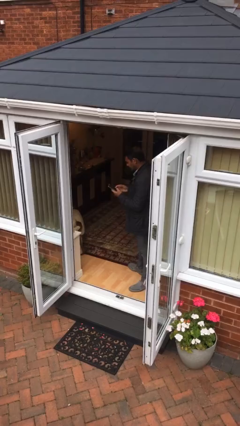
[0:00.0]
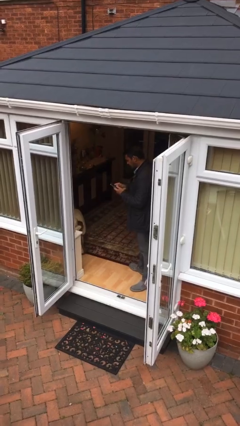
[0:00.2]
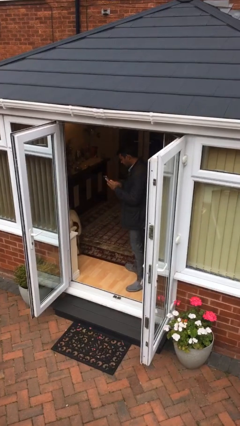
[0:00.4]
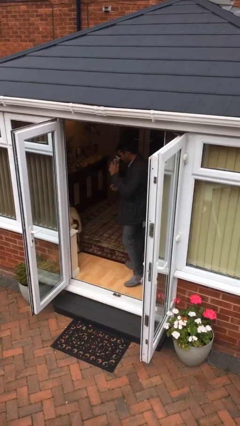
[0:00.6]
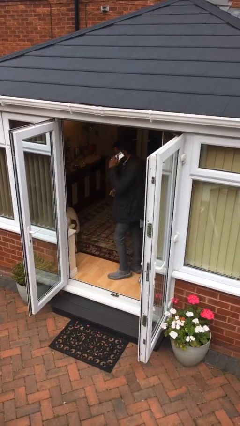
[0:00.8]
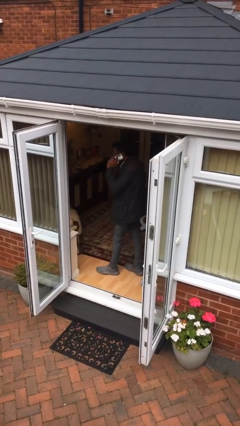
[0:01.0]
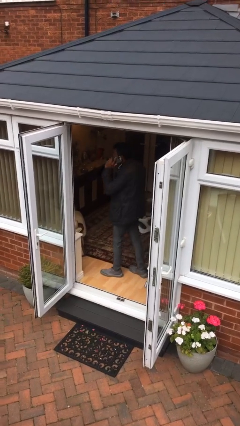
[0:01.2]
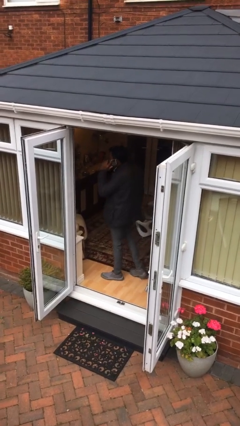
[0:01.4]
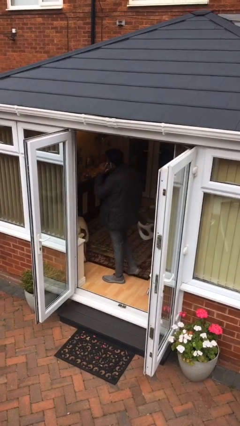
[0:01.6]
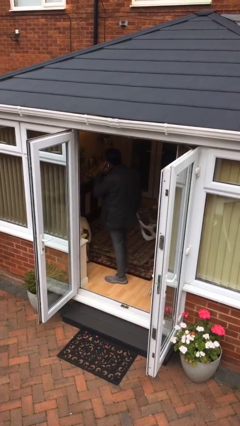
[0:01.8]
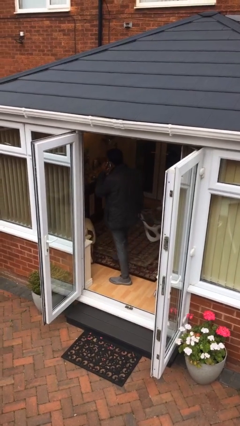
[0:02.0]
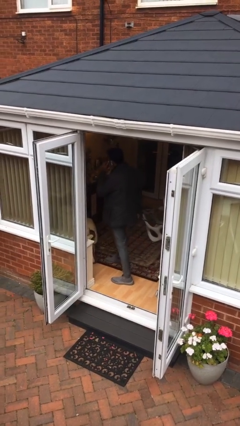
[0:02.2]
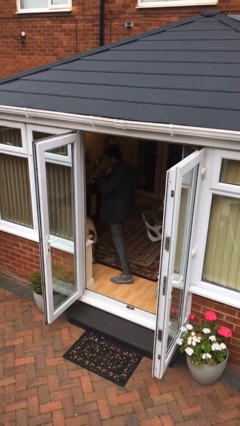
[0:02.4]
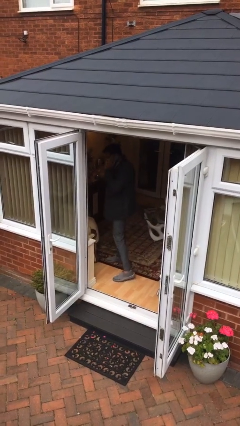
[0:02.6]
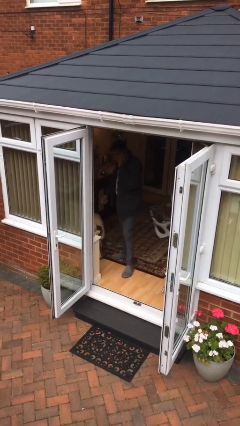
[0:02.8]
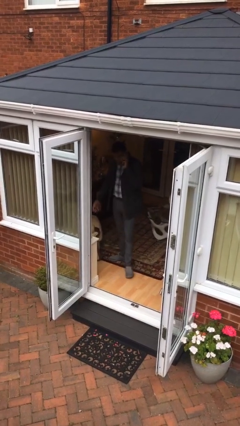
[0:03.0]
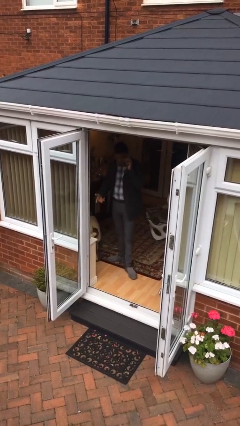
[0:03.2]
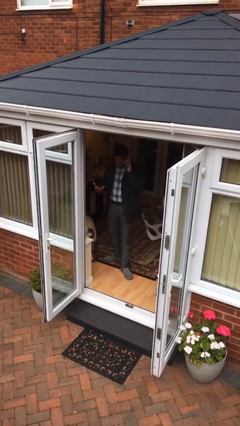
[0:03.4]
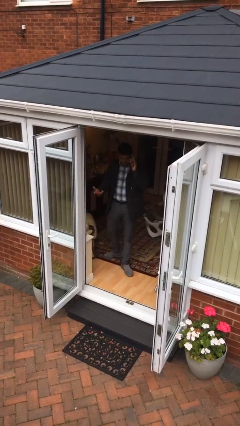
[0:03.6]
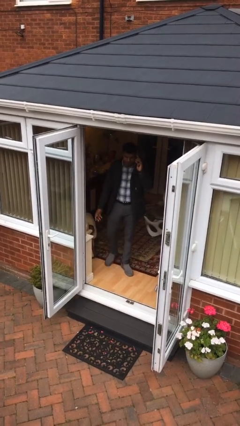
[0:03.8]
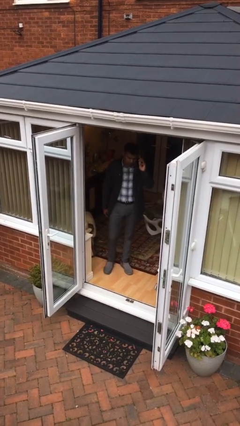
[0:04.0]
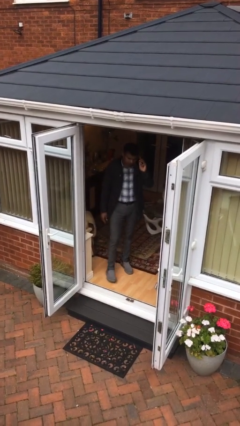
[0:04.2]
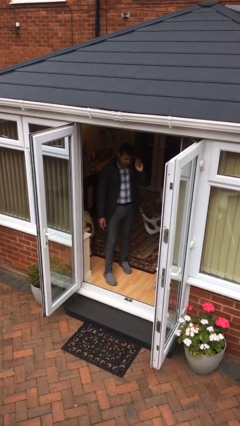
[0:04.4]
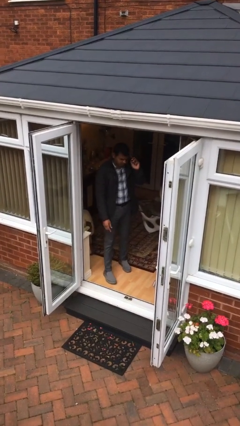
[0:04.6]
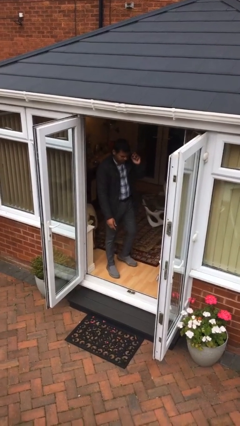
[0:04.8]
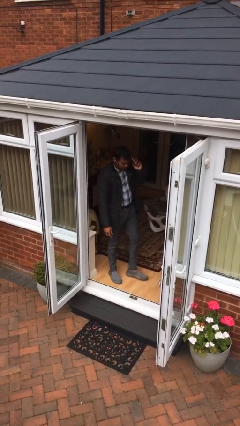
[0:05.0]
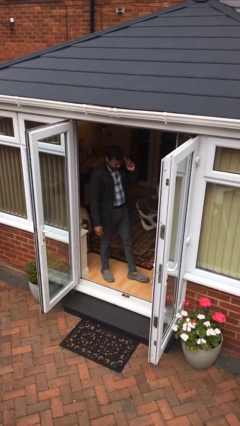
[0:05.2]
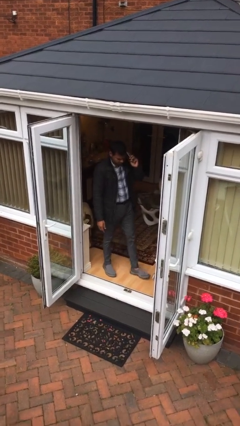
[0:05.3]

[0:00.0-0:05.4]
person talks on phone

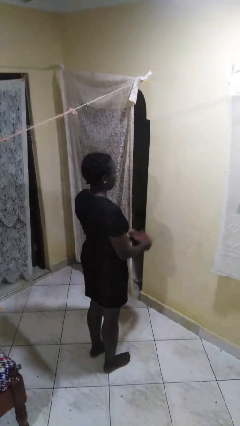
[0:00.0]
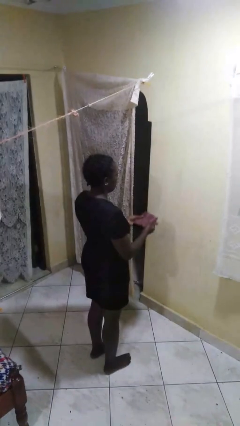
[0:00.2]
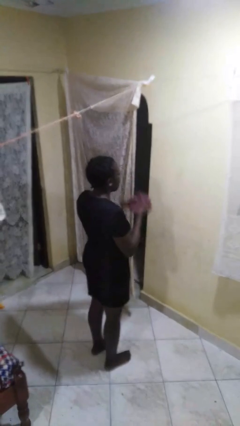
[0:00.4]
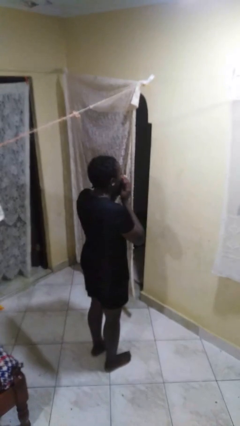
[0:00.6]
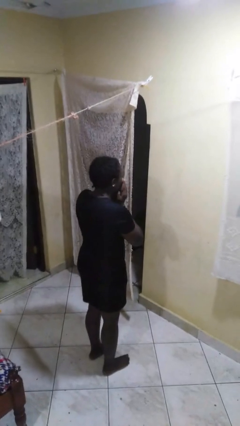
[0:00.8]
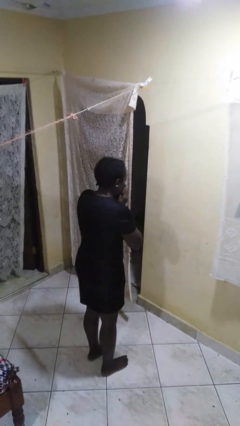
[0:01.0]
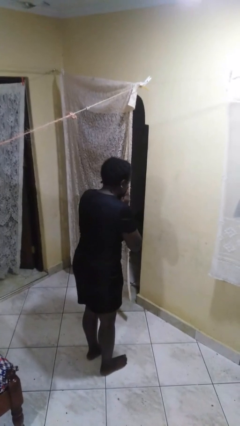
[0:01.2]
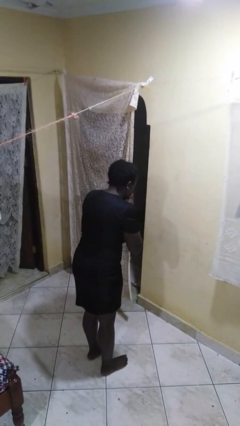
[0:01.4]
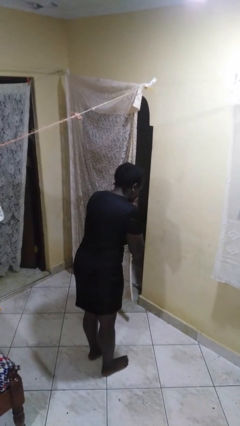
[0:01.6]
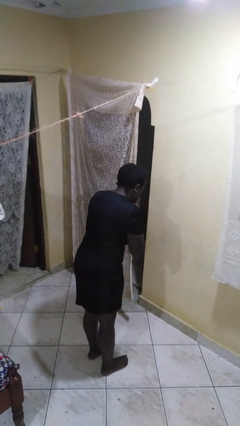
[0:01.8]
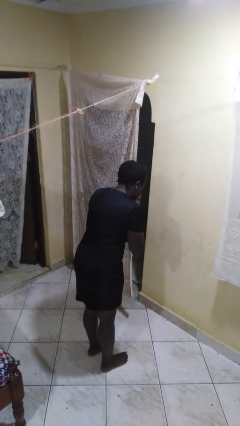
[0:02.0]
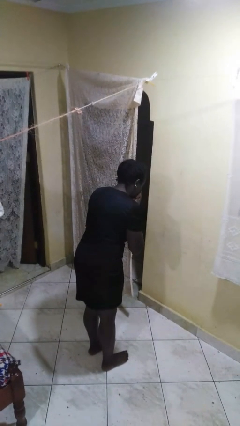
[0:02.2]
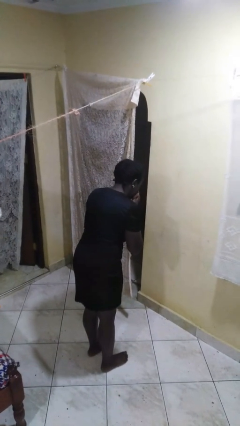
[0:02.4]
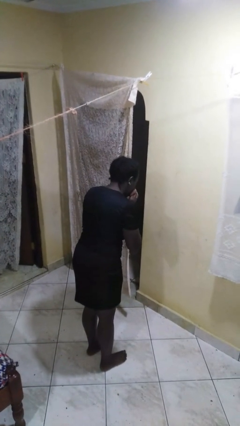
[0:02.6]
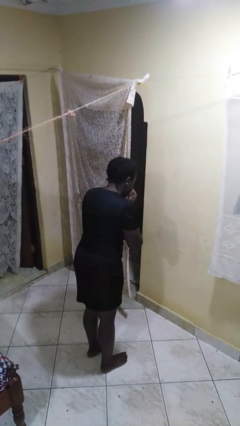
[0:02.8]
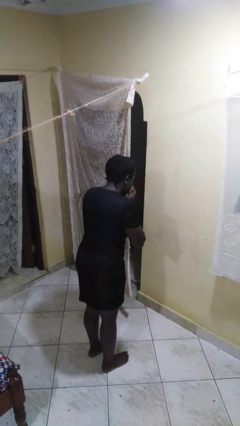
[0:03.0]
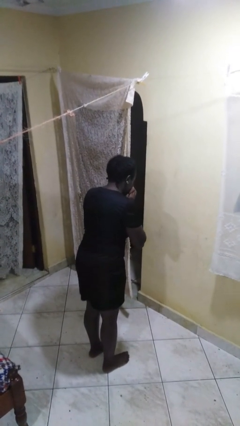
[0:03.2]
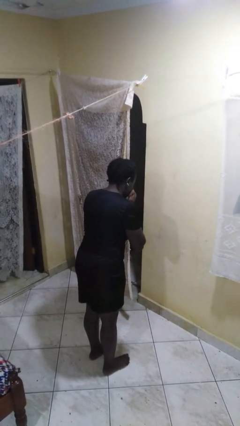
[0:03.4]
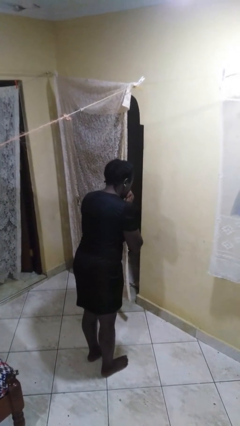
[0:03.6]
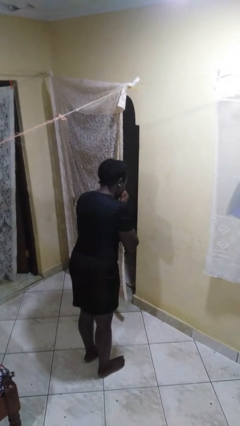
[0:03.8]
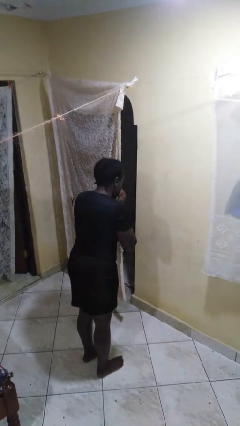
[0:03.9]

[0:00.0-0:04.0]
person blows nose

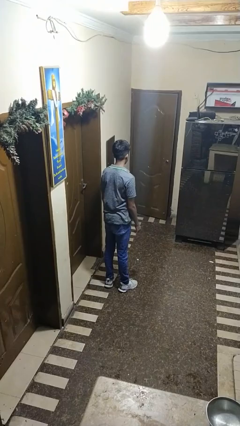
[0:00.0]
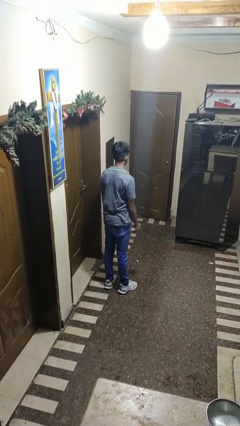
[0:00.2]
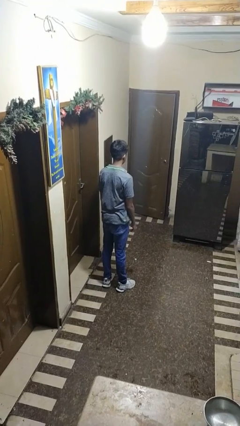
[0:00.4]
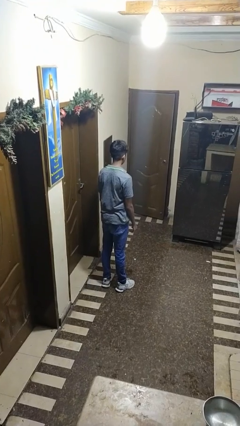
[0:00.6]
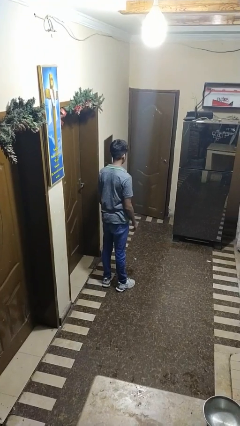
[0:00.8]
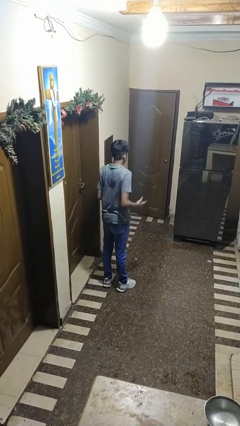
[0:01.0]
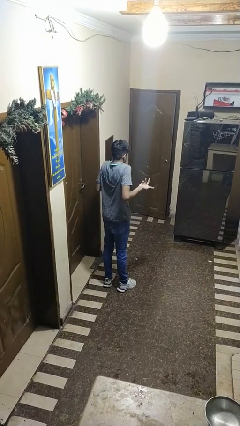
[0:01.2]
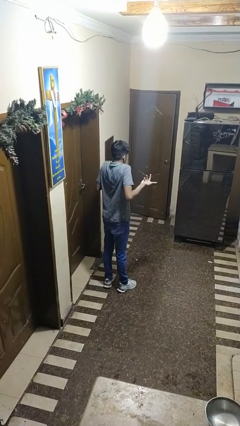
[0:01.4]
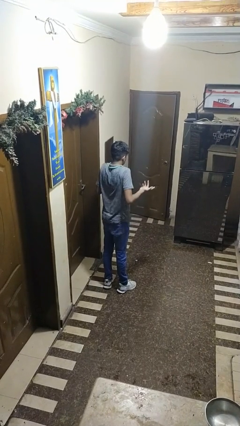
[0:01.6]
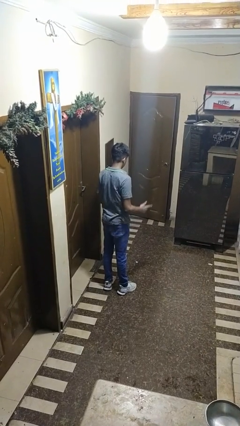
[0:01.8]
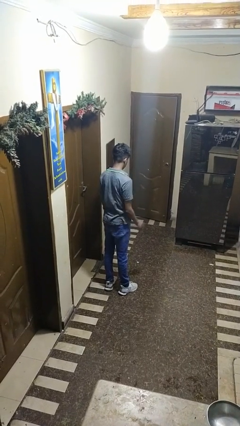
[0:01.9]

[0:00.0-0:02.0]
person shrugs

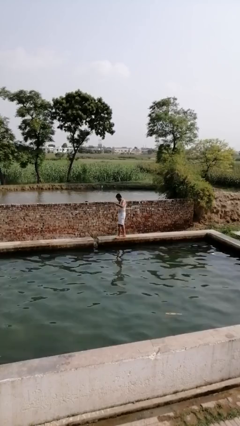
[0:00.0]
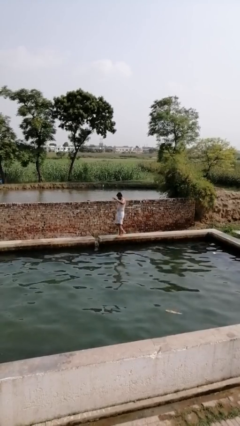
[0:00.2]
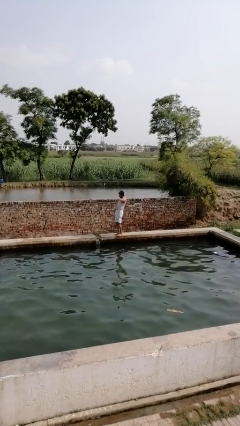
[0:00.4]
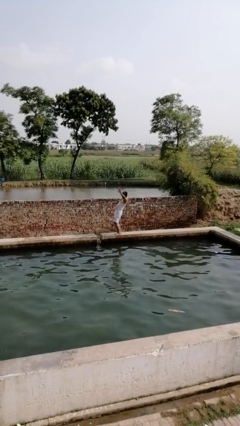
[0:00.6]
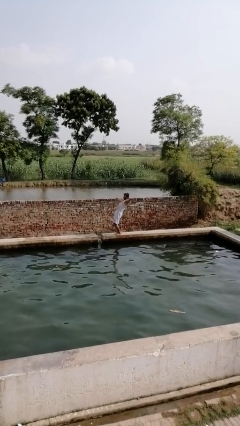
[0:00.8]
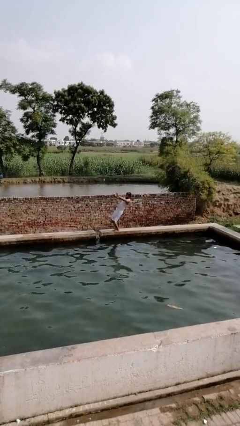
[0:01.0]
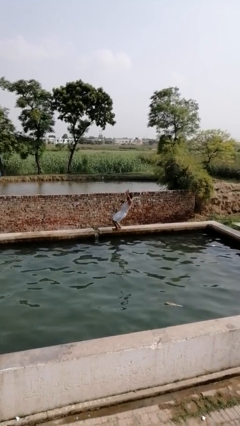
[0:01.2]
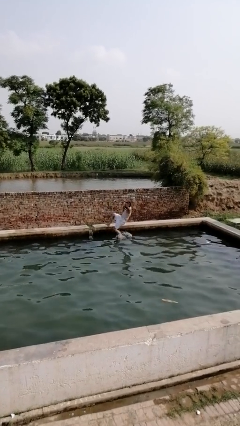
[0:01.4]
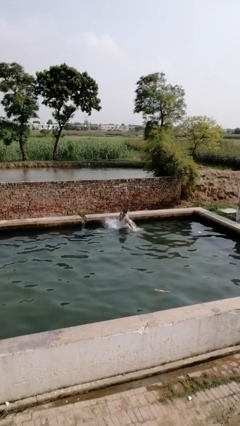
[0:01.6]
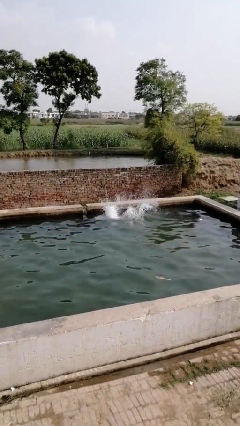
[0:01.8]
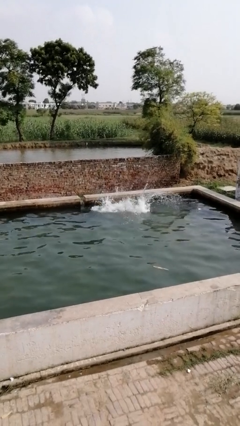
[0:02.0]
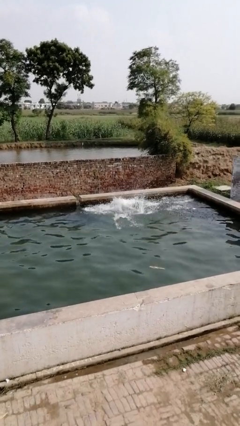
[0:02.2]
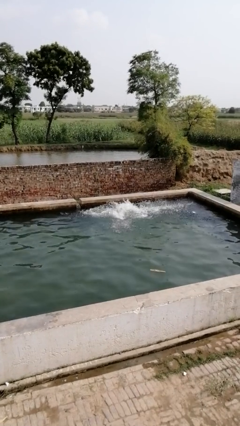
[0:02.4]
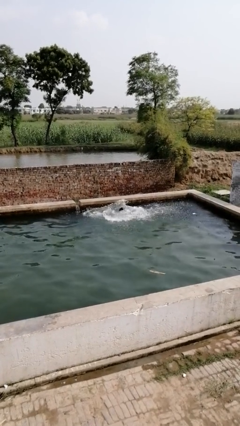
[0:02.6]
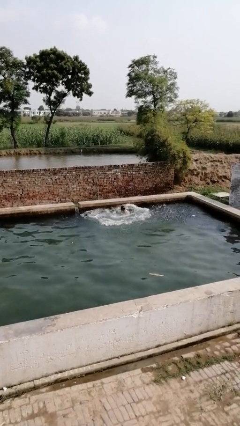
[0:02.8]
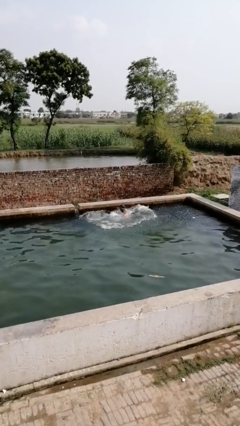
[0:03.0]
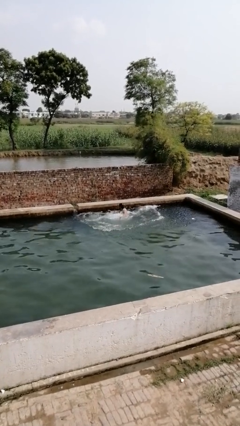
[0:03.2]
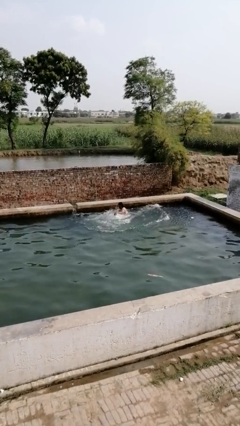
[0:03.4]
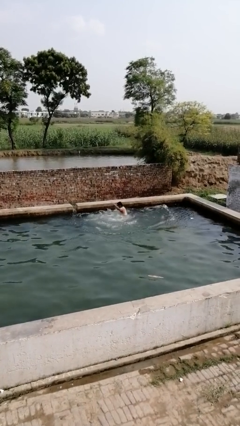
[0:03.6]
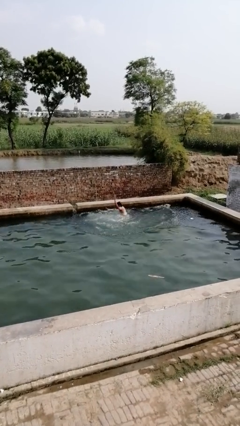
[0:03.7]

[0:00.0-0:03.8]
person falls into pool

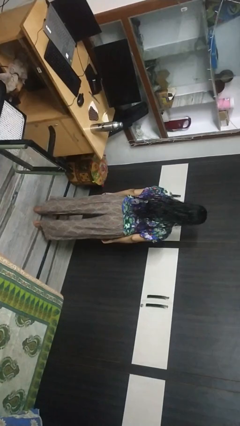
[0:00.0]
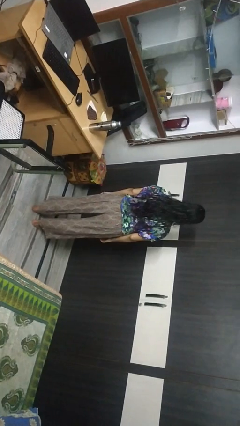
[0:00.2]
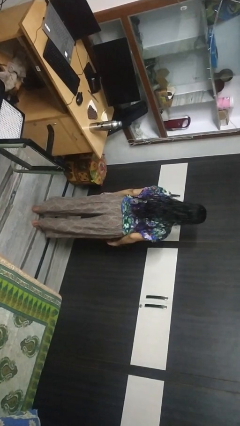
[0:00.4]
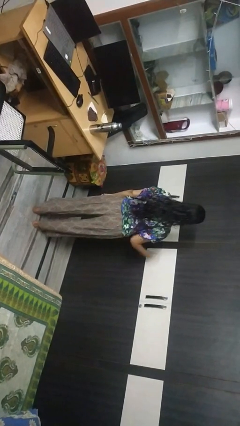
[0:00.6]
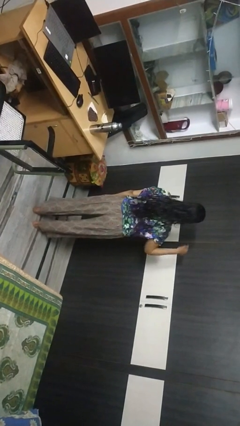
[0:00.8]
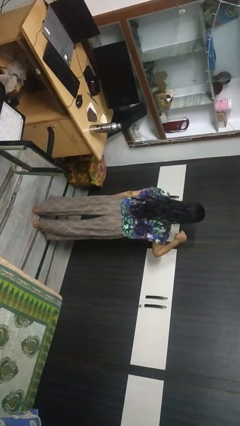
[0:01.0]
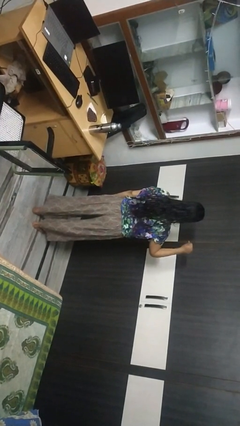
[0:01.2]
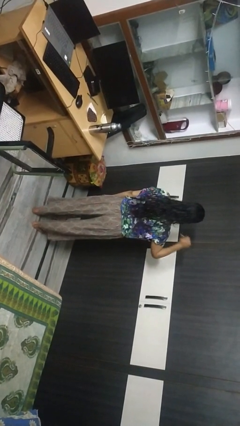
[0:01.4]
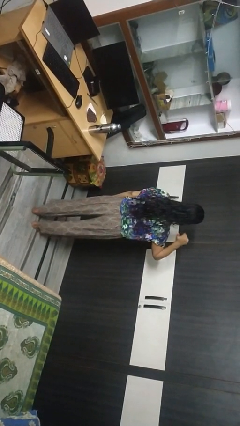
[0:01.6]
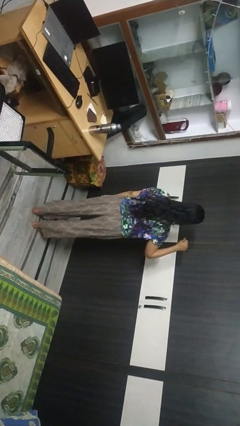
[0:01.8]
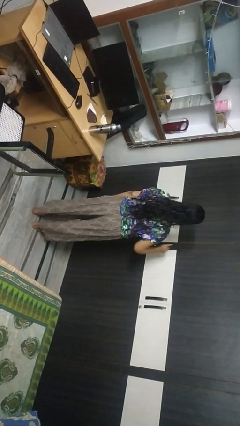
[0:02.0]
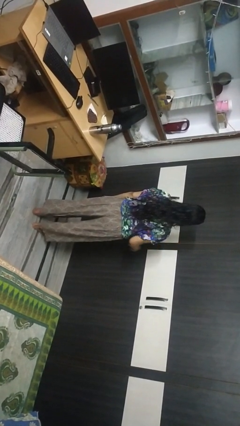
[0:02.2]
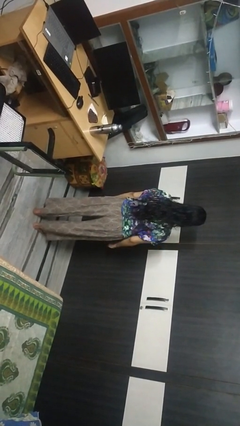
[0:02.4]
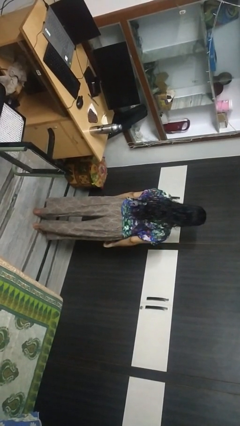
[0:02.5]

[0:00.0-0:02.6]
person gestures behind me
